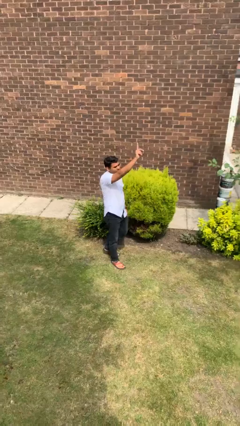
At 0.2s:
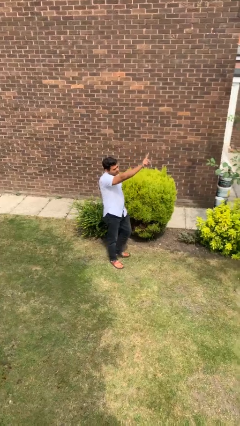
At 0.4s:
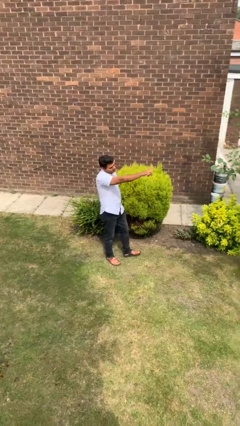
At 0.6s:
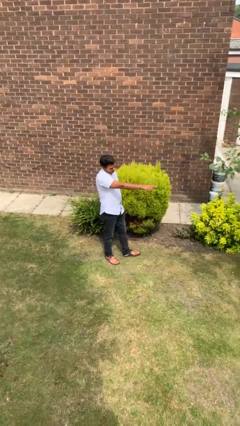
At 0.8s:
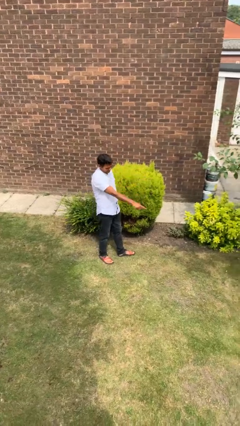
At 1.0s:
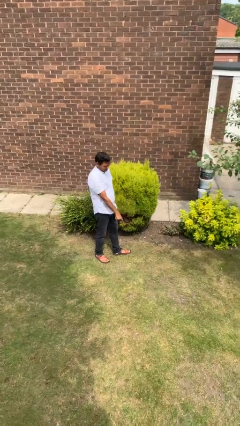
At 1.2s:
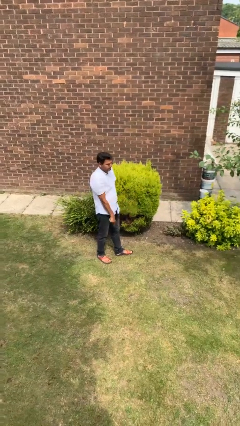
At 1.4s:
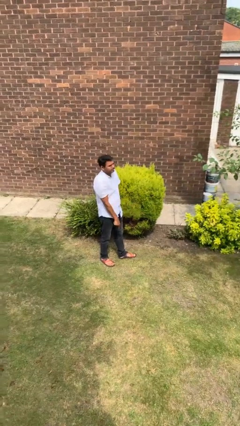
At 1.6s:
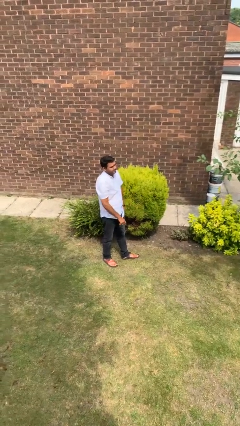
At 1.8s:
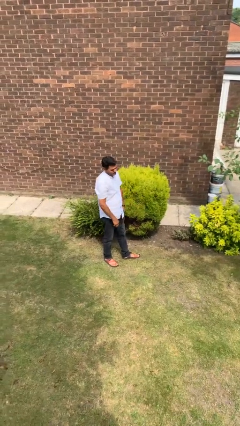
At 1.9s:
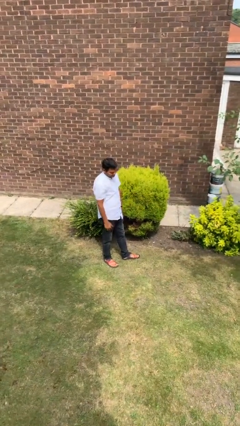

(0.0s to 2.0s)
person gestures swipe down

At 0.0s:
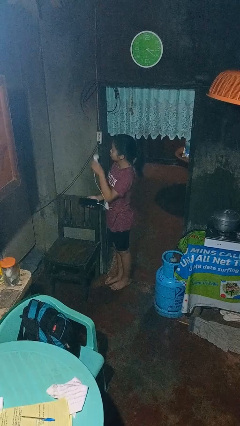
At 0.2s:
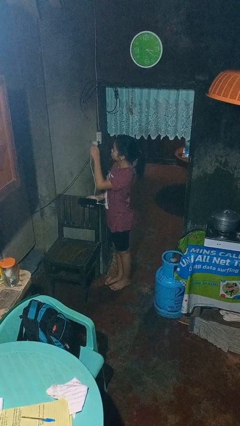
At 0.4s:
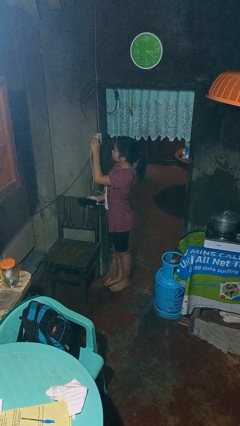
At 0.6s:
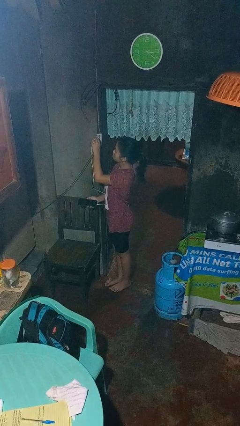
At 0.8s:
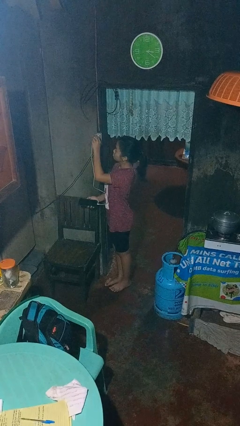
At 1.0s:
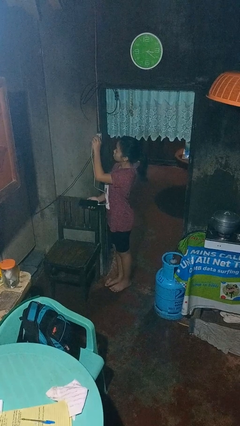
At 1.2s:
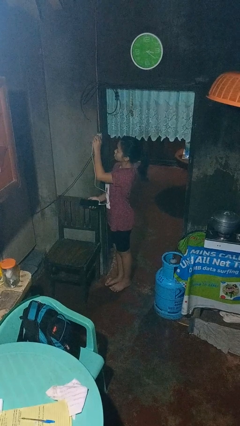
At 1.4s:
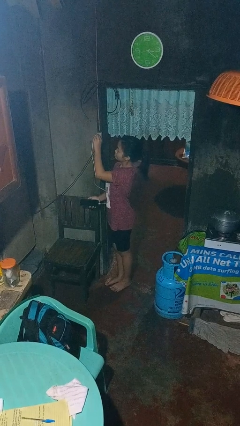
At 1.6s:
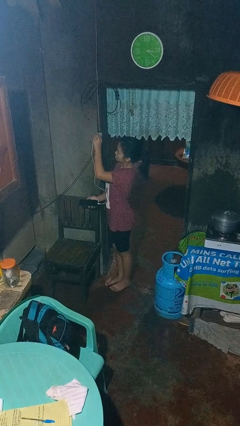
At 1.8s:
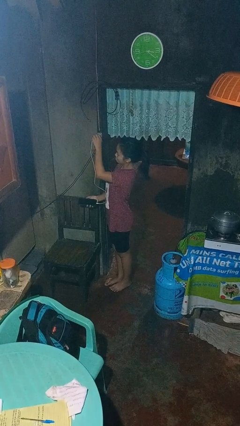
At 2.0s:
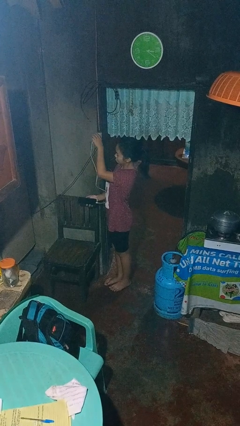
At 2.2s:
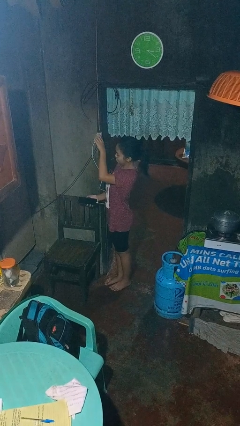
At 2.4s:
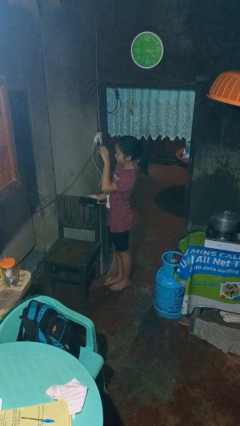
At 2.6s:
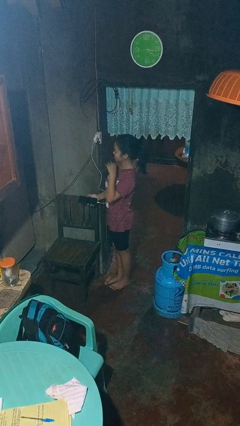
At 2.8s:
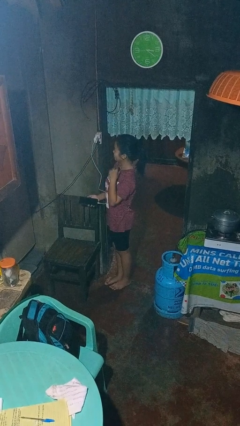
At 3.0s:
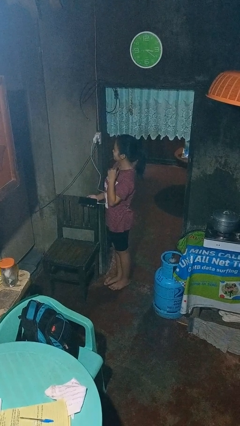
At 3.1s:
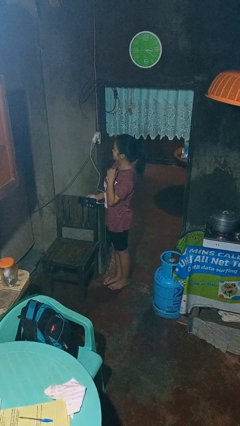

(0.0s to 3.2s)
person plugs into electrical socket

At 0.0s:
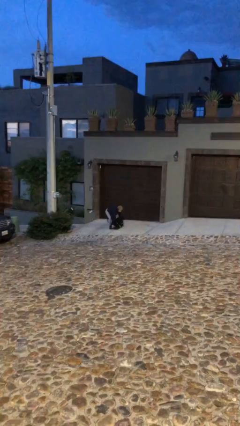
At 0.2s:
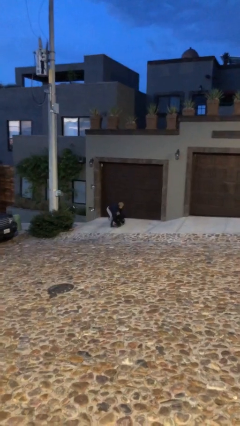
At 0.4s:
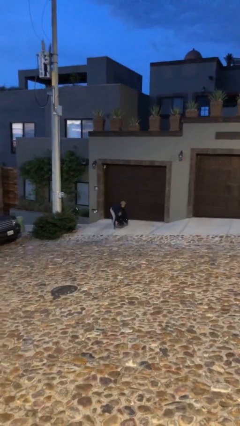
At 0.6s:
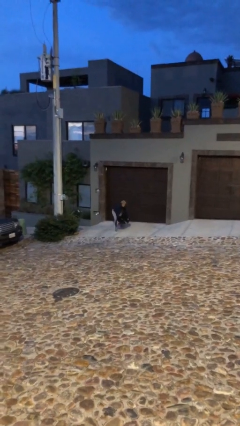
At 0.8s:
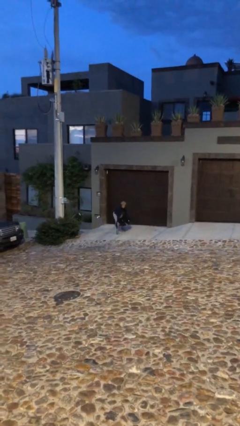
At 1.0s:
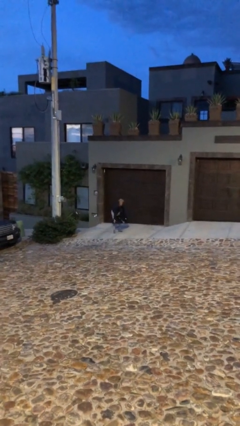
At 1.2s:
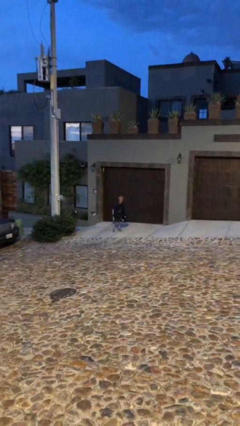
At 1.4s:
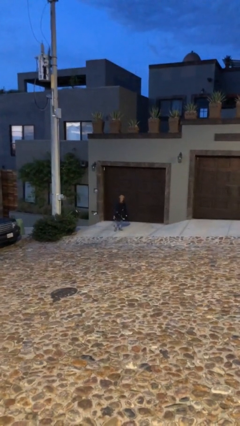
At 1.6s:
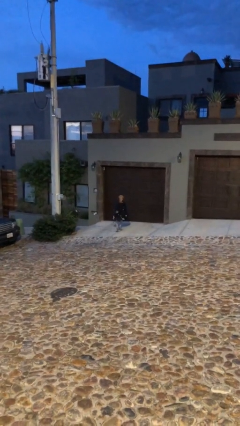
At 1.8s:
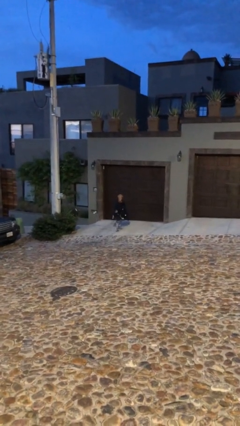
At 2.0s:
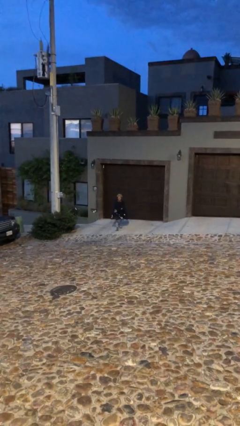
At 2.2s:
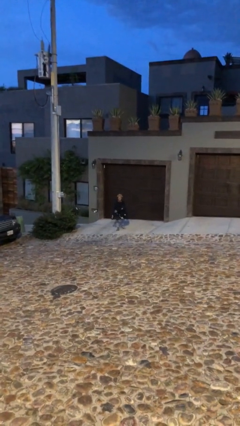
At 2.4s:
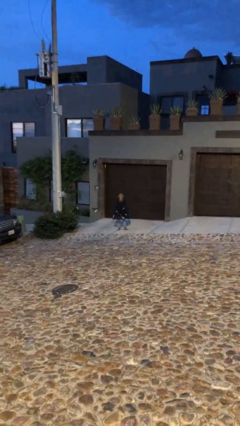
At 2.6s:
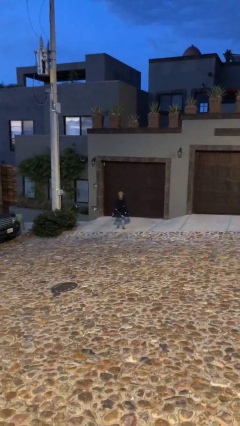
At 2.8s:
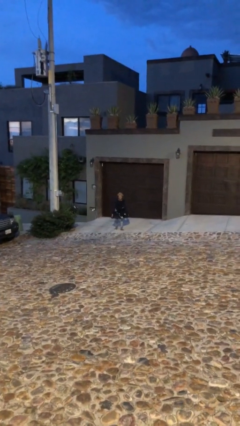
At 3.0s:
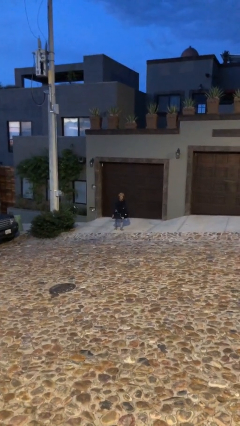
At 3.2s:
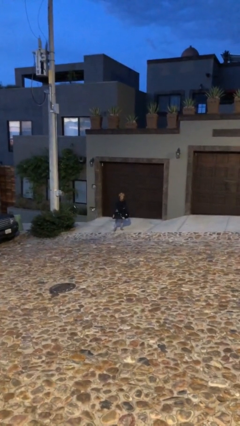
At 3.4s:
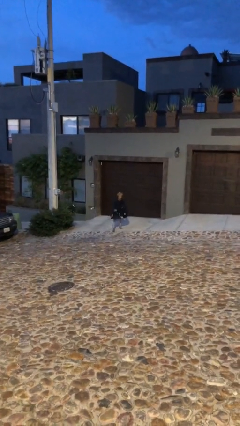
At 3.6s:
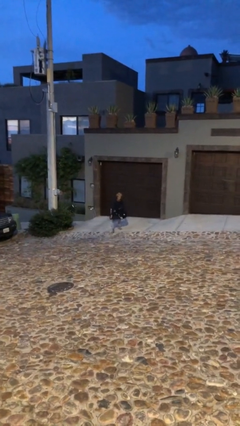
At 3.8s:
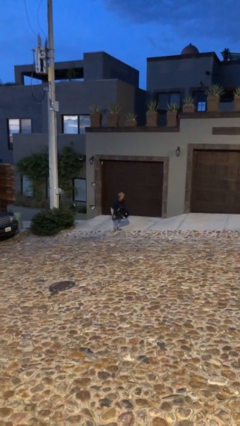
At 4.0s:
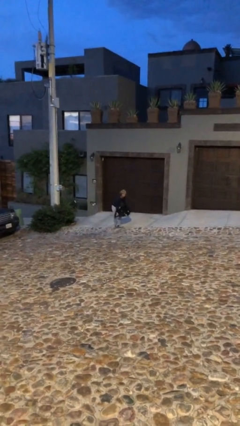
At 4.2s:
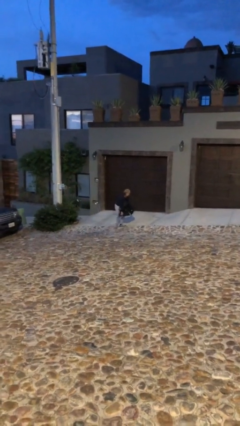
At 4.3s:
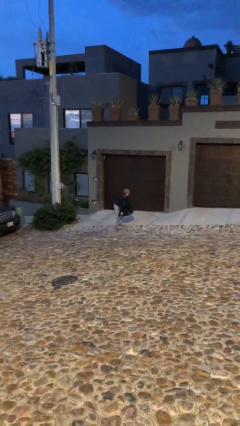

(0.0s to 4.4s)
person carries heavy object

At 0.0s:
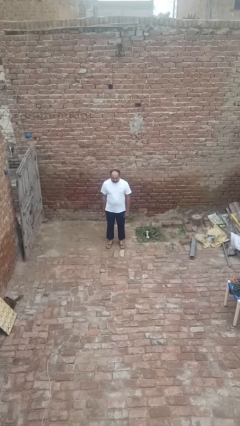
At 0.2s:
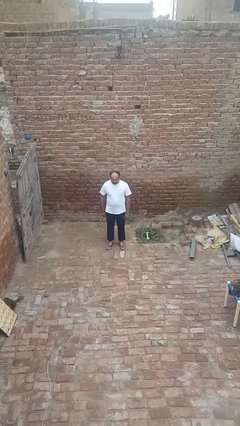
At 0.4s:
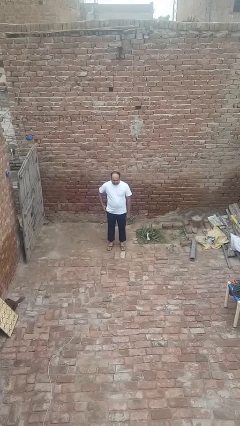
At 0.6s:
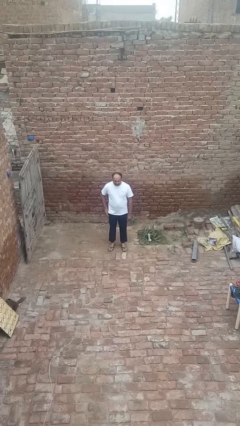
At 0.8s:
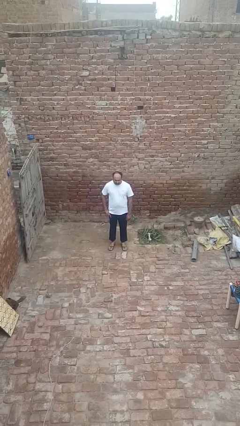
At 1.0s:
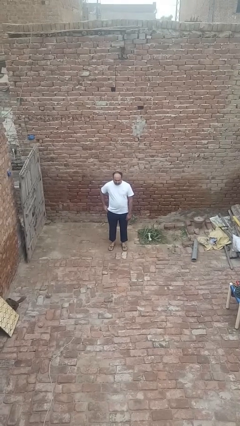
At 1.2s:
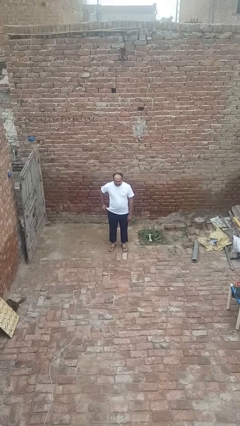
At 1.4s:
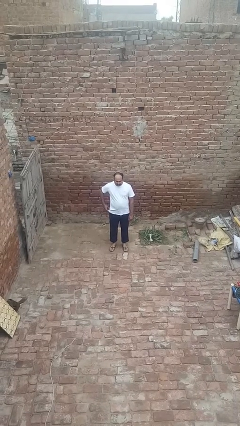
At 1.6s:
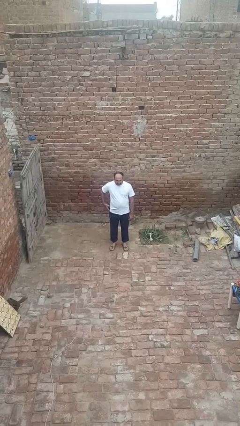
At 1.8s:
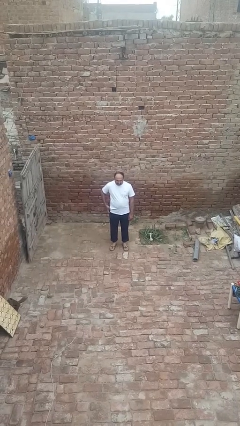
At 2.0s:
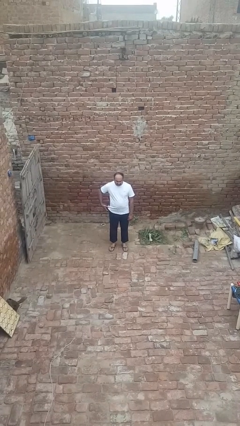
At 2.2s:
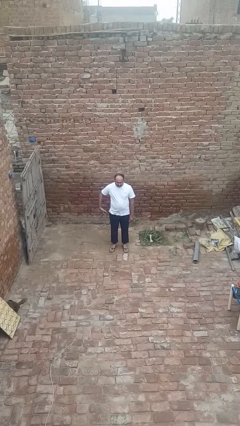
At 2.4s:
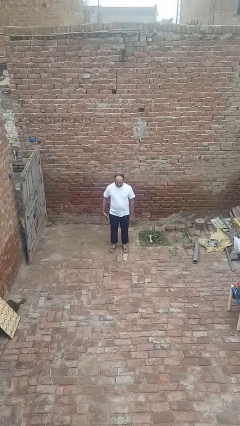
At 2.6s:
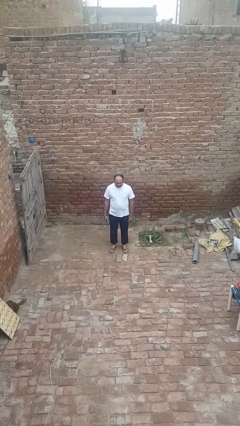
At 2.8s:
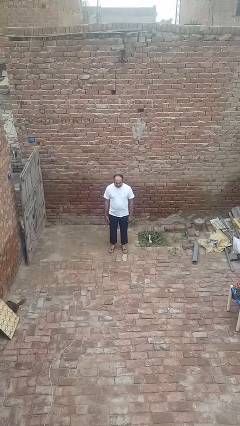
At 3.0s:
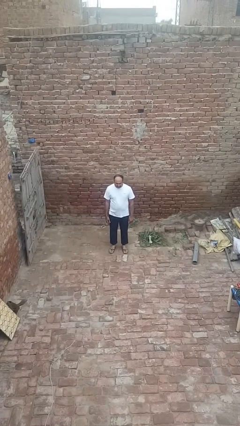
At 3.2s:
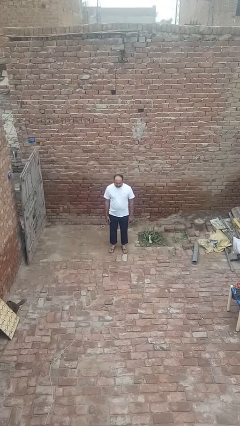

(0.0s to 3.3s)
person takes phone from pocket

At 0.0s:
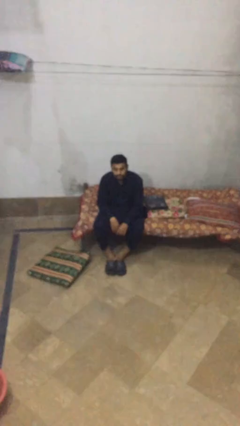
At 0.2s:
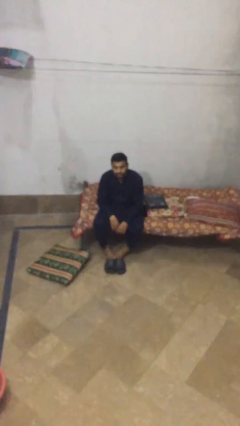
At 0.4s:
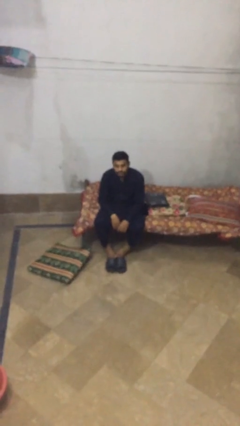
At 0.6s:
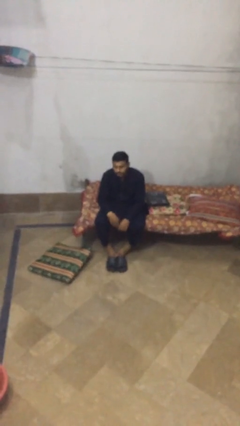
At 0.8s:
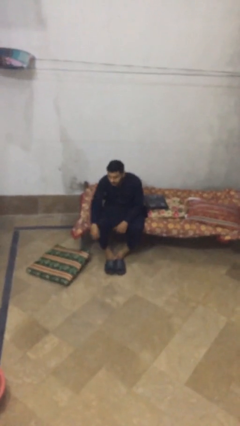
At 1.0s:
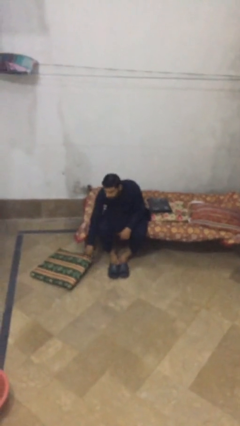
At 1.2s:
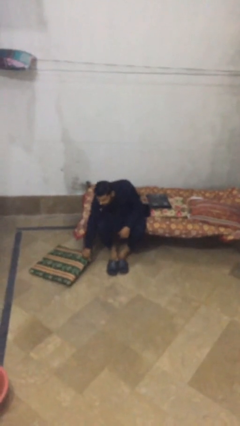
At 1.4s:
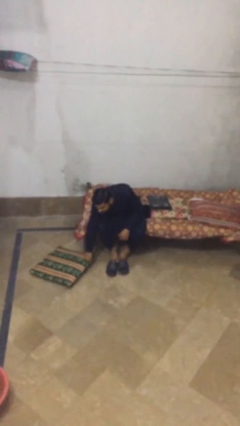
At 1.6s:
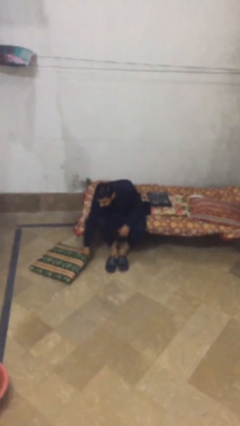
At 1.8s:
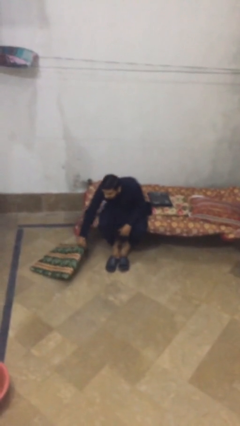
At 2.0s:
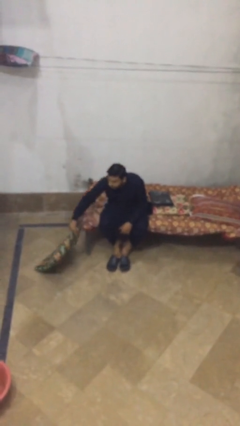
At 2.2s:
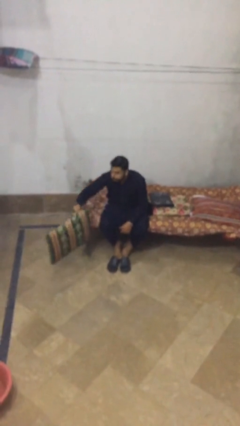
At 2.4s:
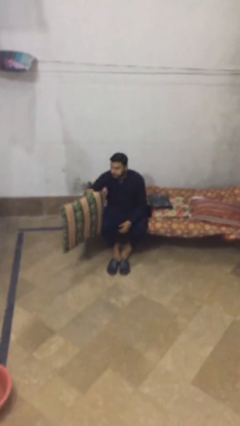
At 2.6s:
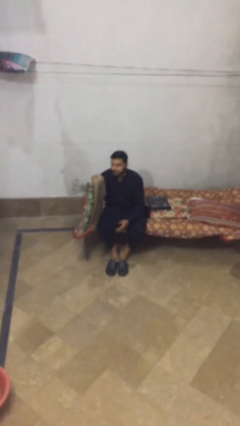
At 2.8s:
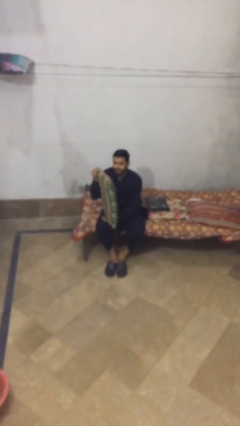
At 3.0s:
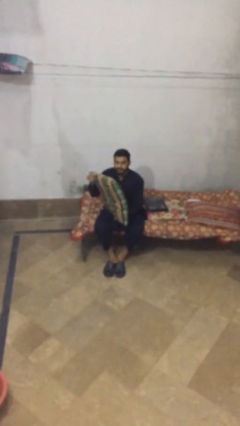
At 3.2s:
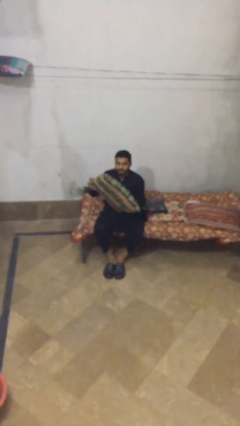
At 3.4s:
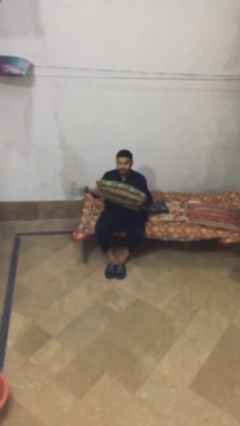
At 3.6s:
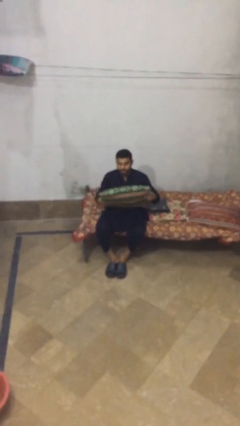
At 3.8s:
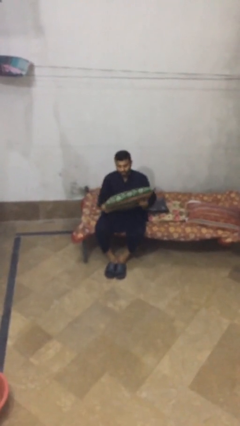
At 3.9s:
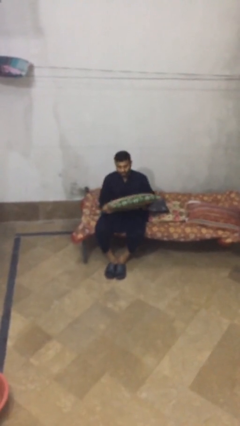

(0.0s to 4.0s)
person picks up object from floor

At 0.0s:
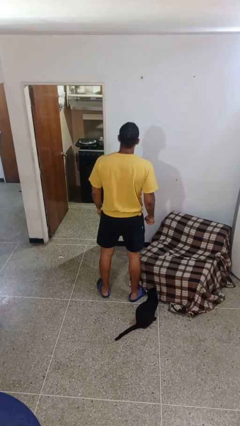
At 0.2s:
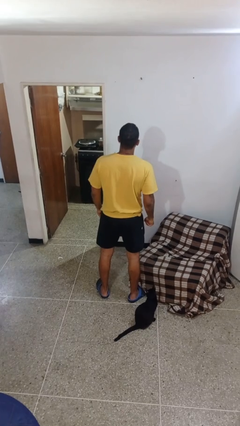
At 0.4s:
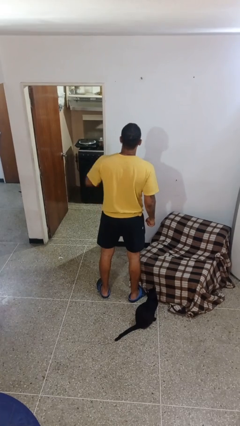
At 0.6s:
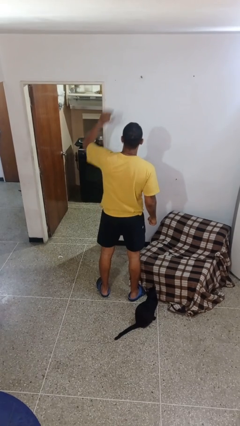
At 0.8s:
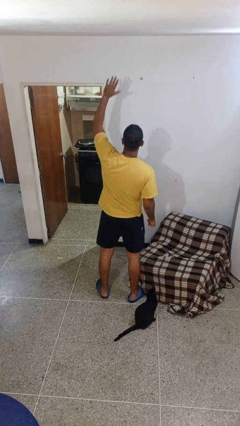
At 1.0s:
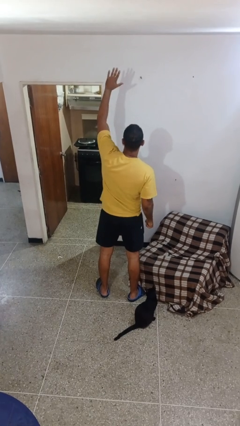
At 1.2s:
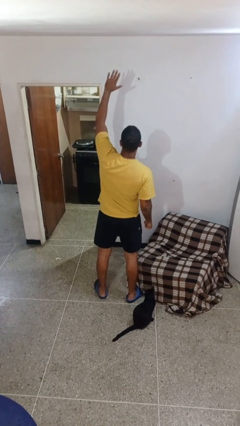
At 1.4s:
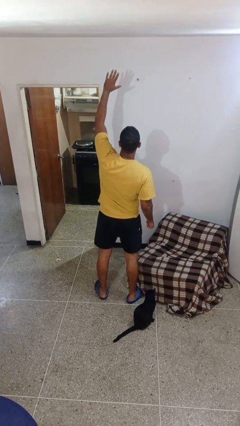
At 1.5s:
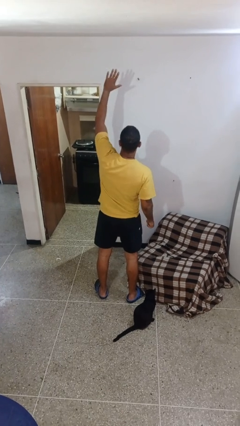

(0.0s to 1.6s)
person gestures raise hand
